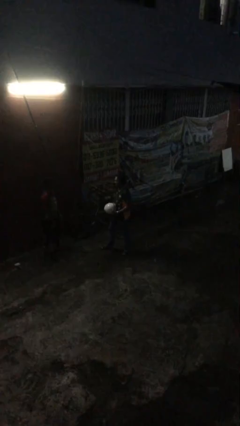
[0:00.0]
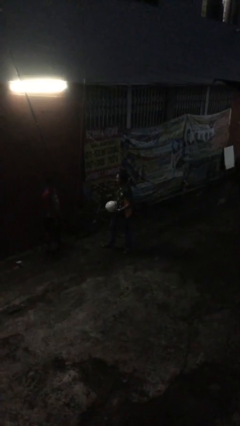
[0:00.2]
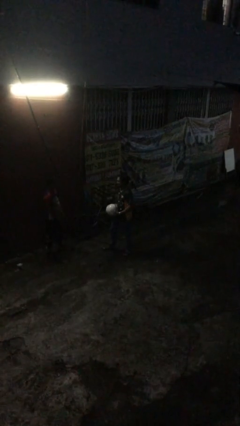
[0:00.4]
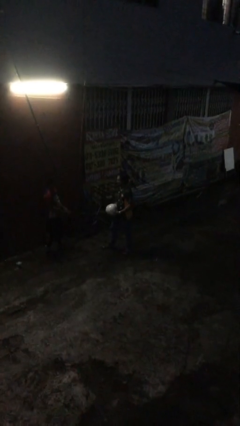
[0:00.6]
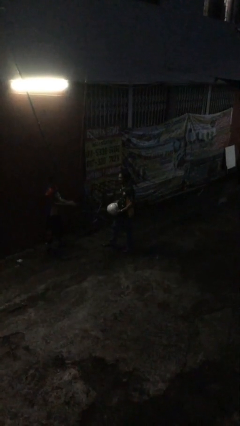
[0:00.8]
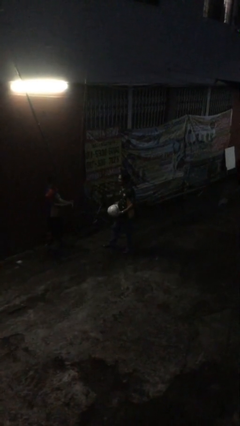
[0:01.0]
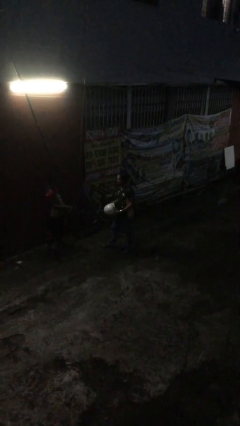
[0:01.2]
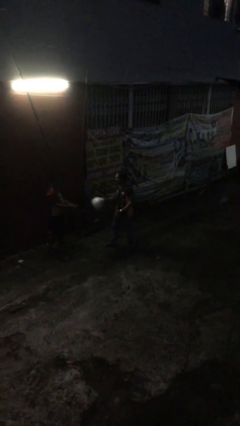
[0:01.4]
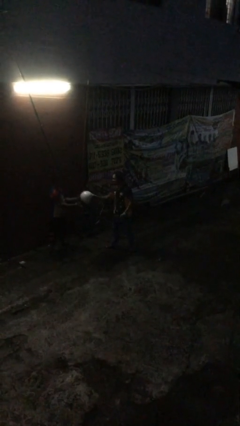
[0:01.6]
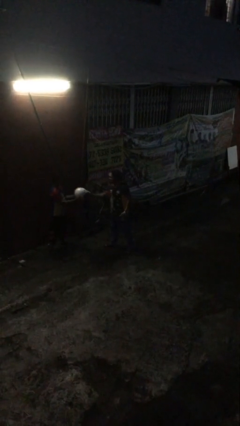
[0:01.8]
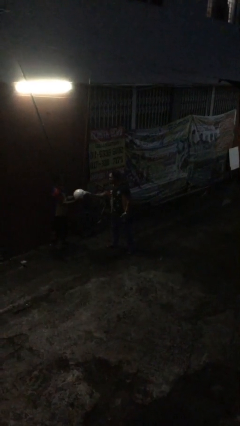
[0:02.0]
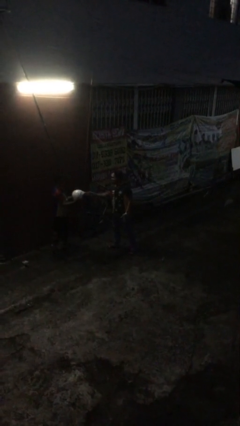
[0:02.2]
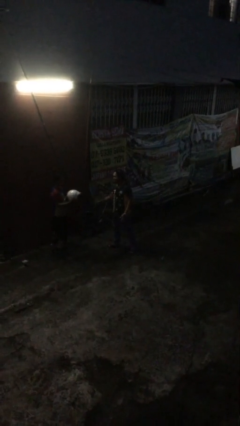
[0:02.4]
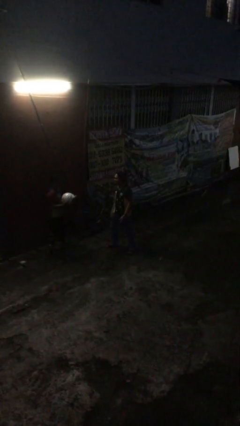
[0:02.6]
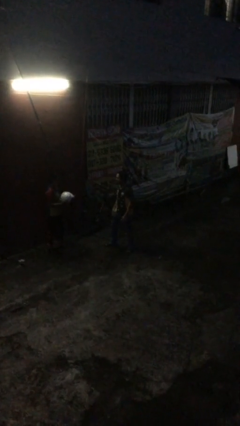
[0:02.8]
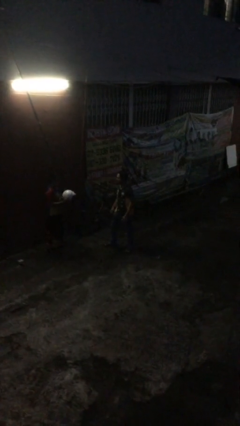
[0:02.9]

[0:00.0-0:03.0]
person transfers object to person

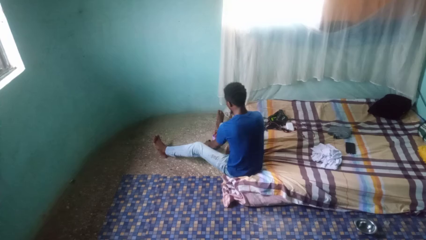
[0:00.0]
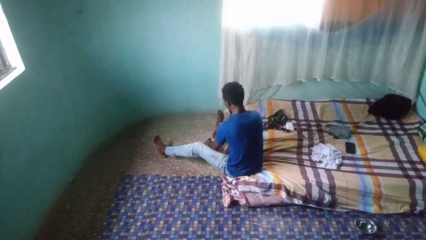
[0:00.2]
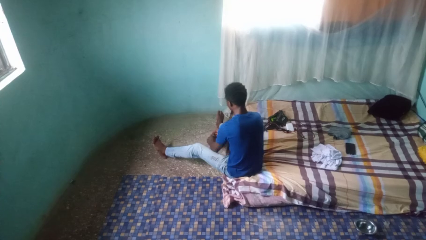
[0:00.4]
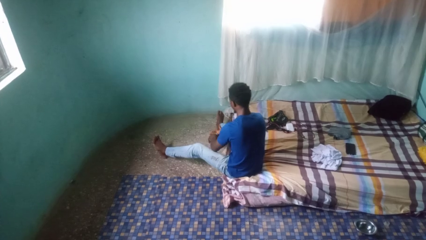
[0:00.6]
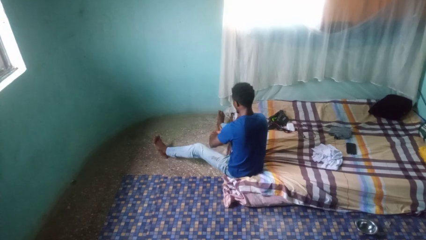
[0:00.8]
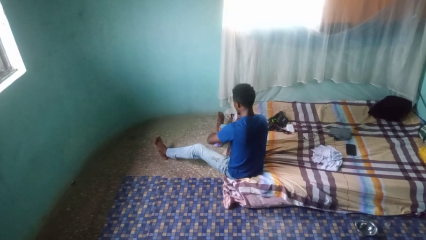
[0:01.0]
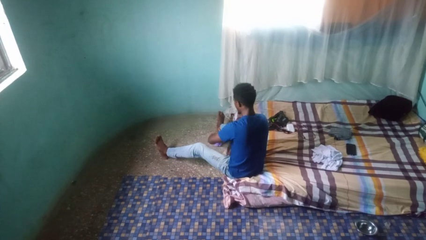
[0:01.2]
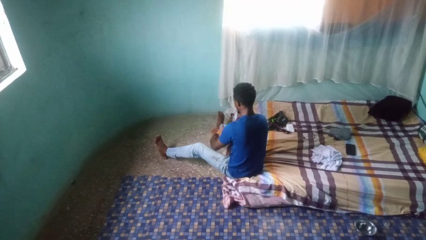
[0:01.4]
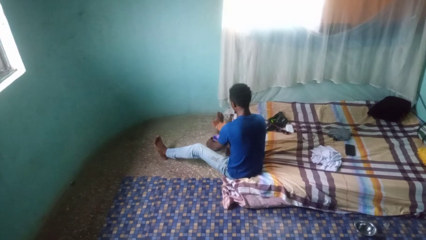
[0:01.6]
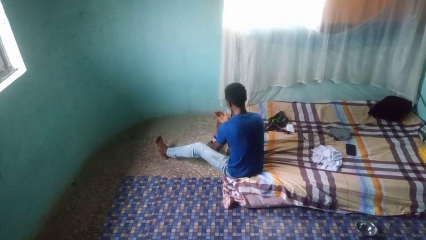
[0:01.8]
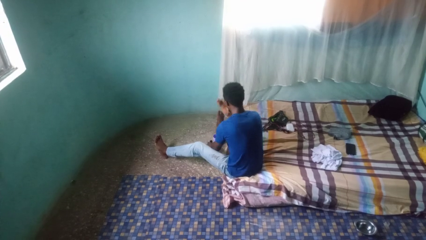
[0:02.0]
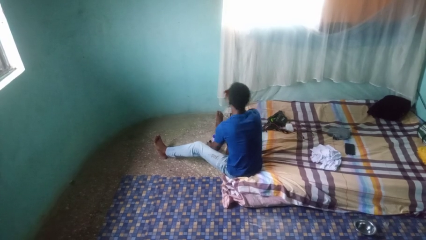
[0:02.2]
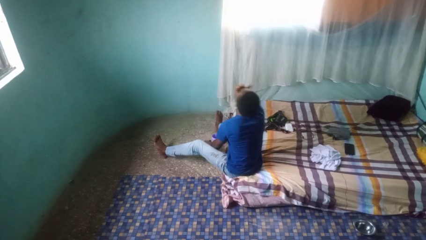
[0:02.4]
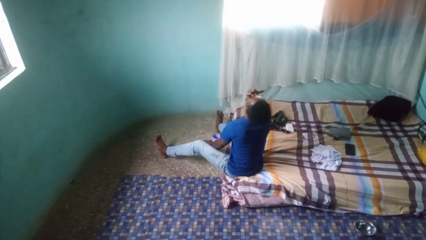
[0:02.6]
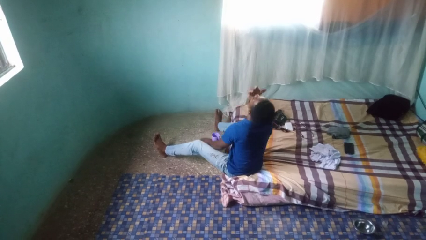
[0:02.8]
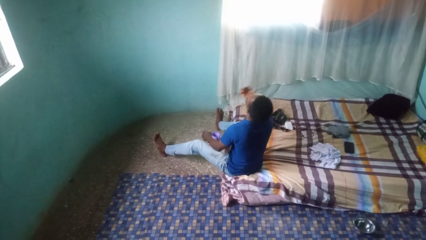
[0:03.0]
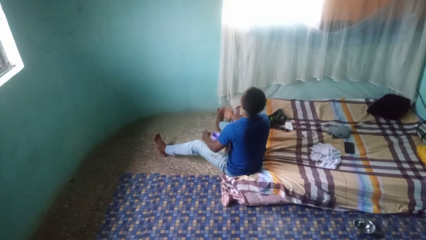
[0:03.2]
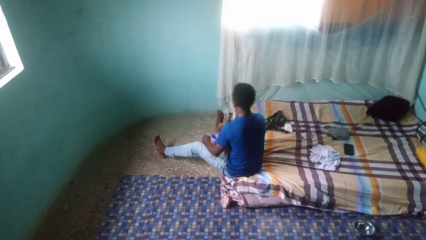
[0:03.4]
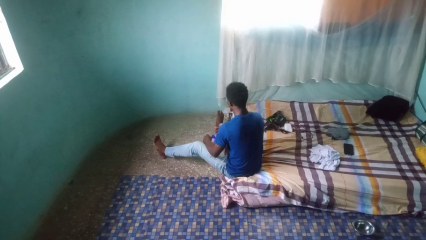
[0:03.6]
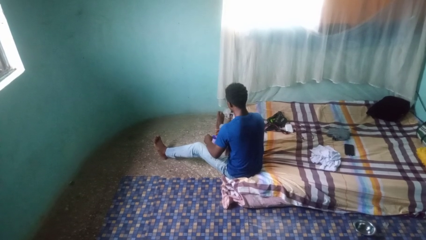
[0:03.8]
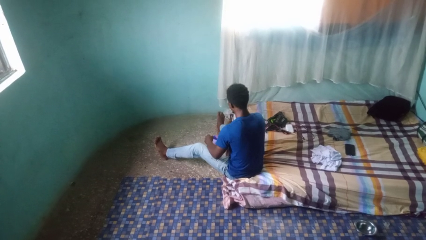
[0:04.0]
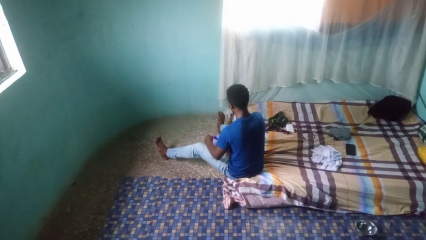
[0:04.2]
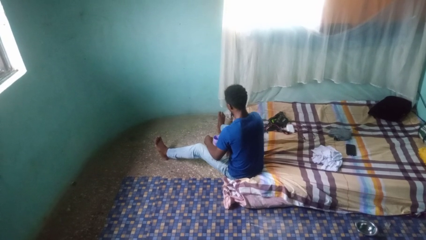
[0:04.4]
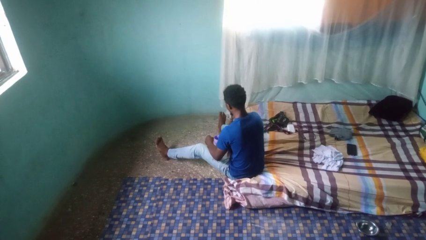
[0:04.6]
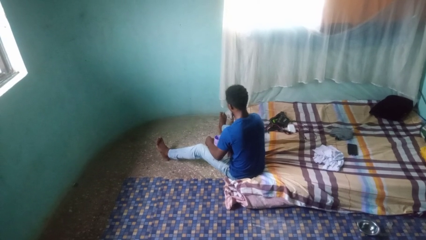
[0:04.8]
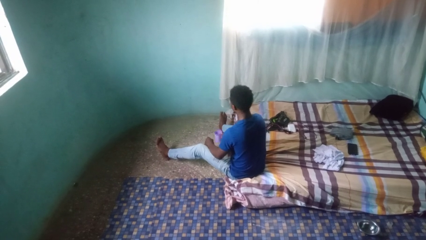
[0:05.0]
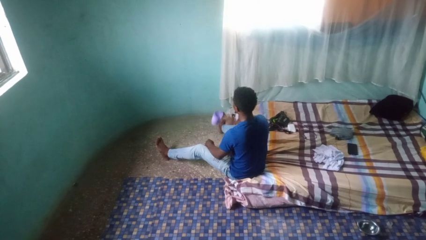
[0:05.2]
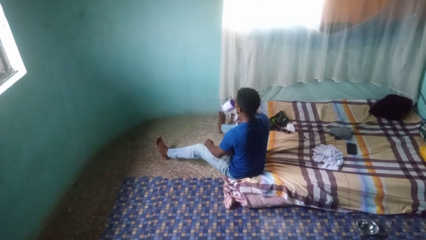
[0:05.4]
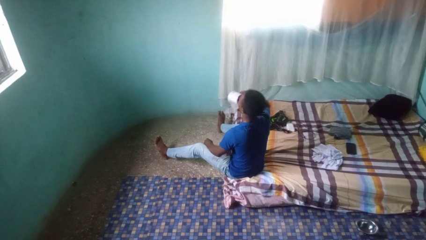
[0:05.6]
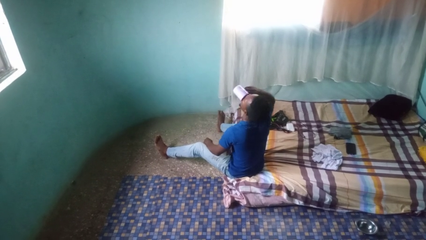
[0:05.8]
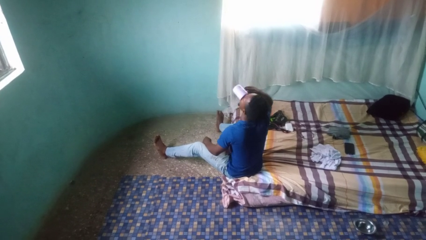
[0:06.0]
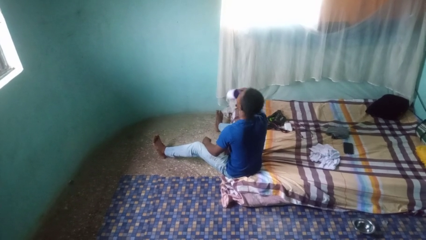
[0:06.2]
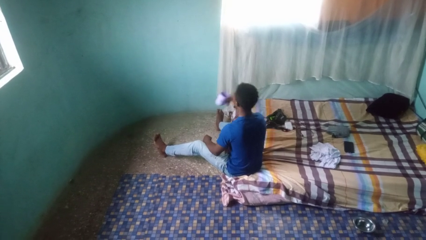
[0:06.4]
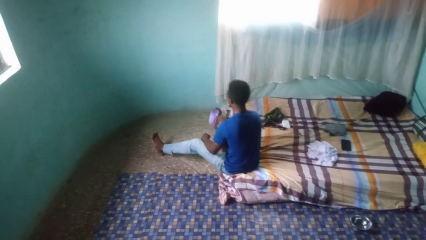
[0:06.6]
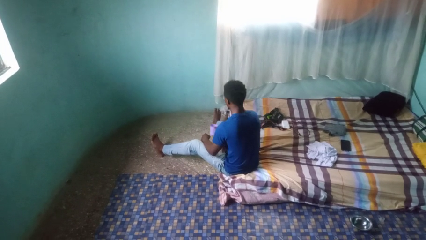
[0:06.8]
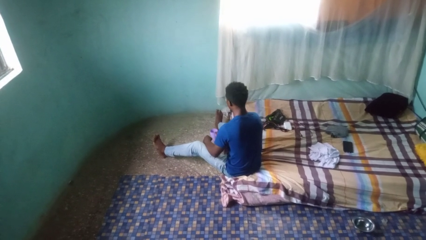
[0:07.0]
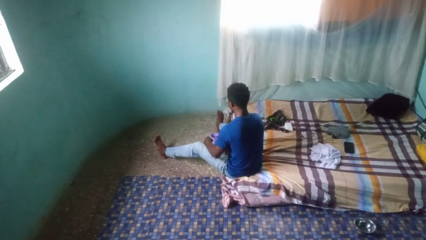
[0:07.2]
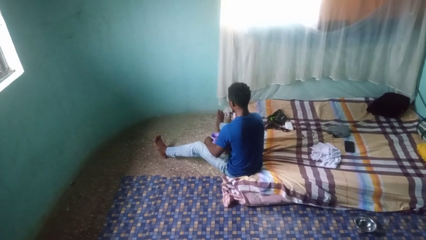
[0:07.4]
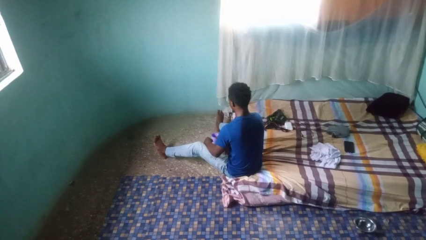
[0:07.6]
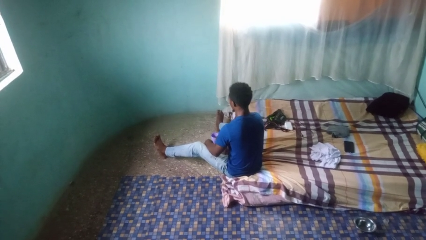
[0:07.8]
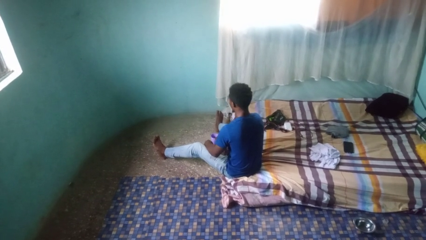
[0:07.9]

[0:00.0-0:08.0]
person takes medicine pills

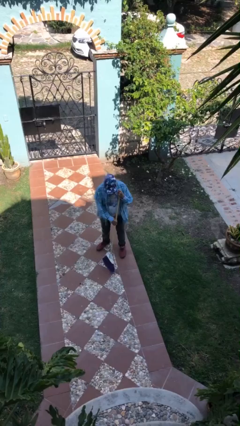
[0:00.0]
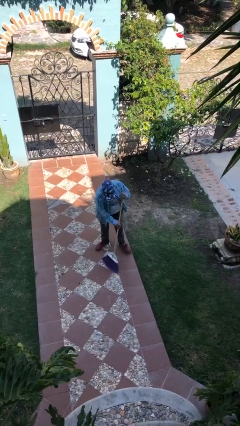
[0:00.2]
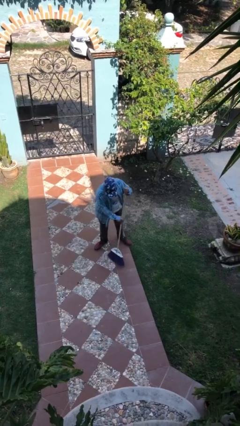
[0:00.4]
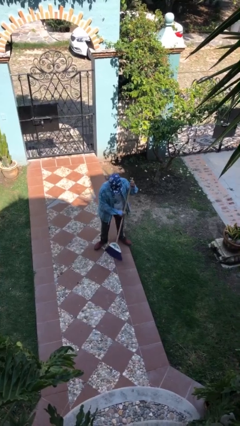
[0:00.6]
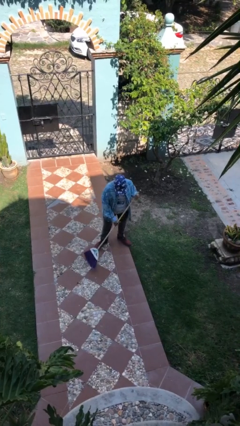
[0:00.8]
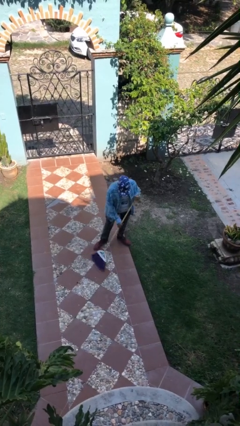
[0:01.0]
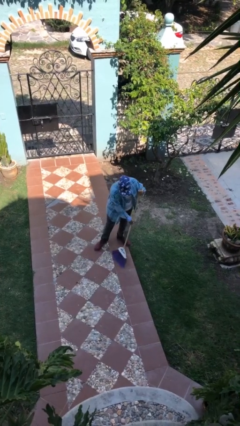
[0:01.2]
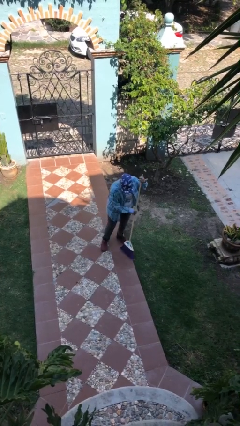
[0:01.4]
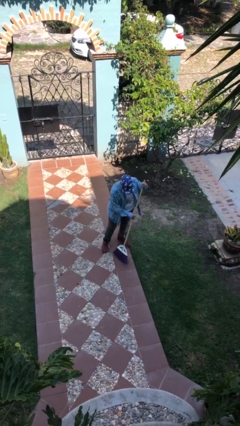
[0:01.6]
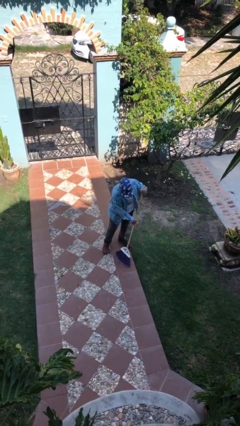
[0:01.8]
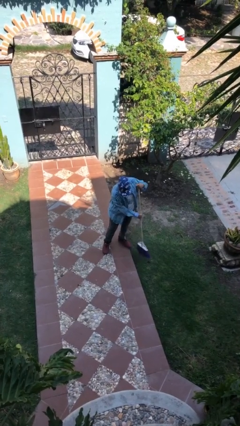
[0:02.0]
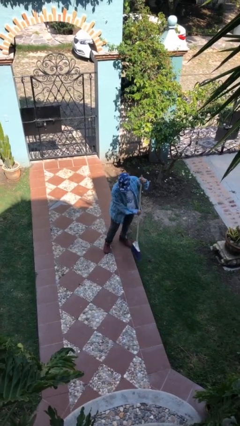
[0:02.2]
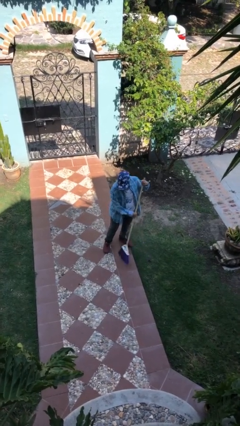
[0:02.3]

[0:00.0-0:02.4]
person sweeps floor

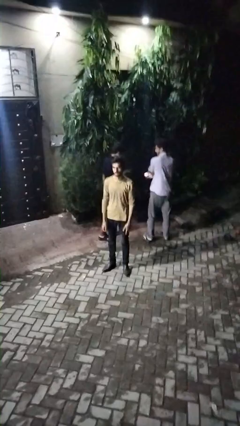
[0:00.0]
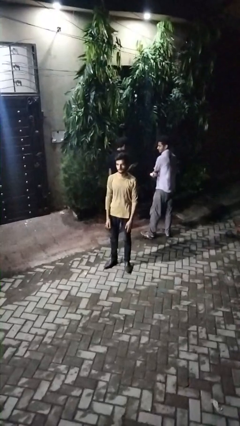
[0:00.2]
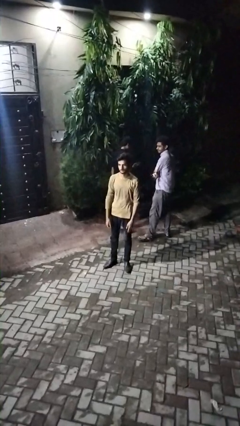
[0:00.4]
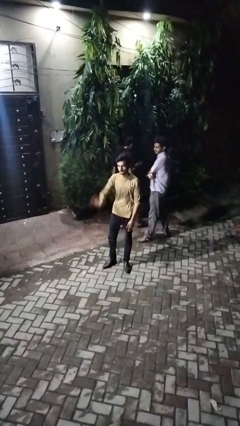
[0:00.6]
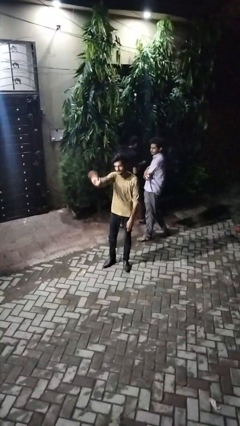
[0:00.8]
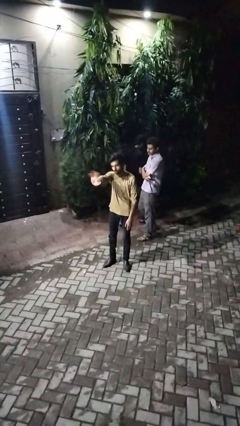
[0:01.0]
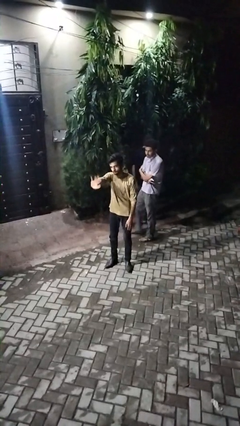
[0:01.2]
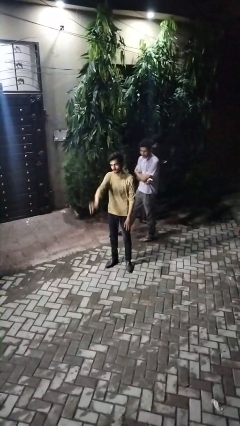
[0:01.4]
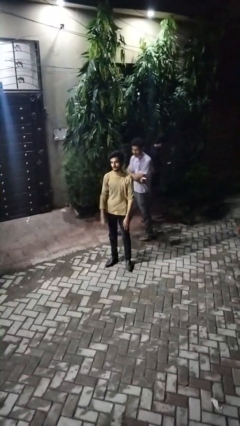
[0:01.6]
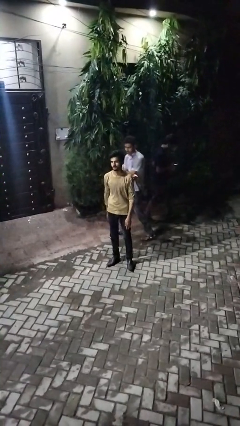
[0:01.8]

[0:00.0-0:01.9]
person waves at person

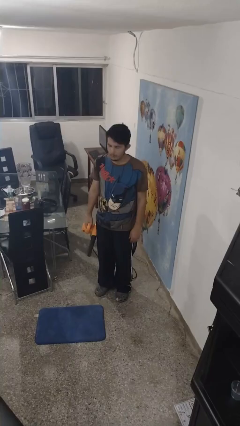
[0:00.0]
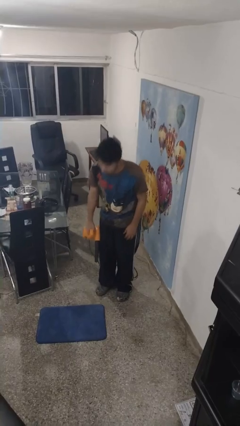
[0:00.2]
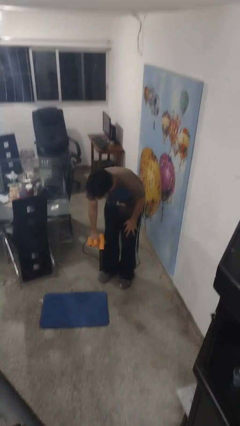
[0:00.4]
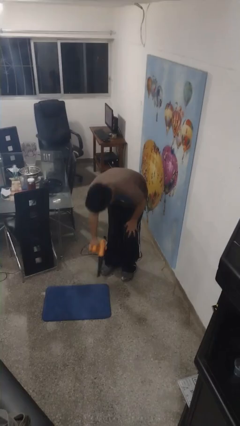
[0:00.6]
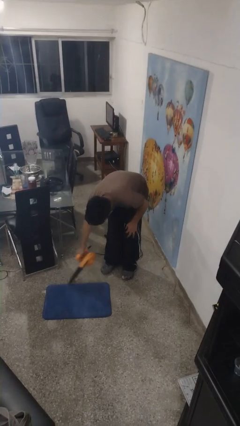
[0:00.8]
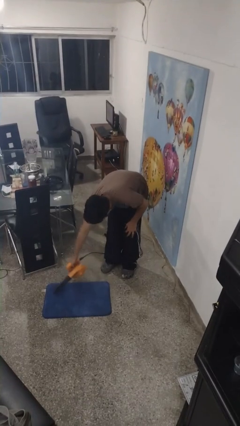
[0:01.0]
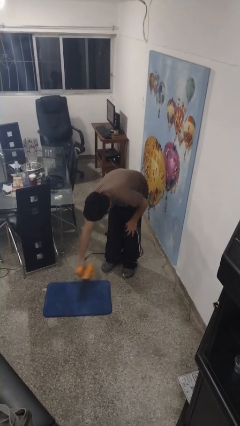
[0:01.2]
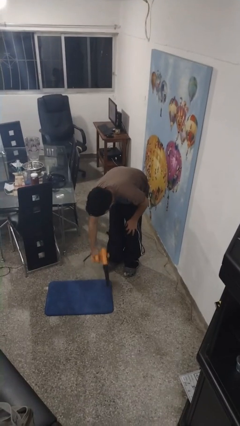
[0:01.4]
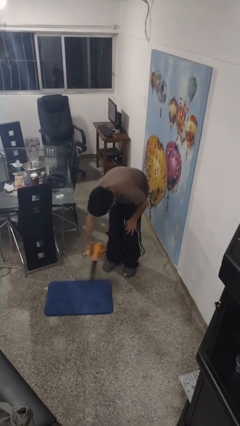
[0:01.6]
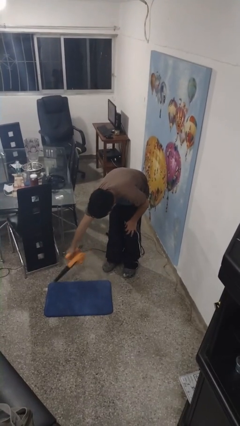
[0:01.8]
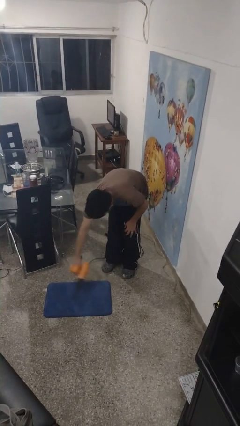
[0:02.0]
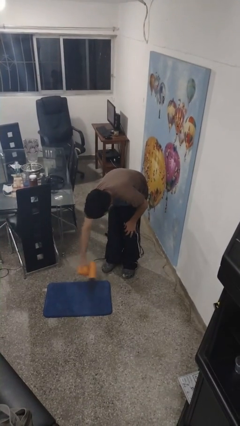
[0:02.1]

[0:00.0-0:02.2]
person vacuums carpet

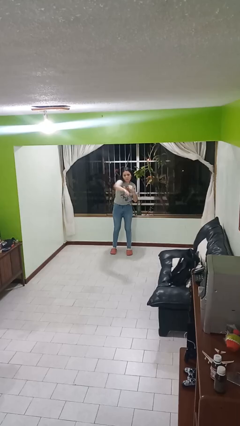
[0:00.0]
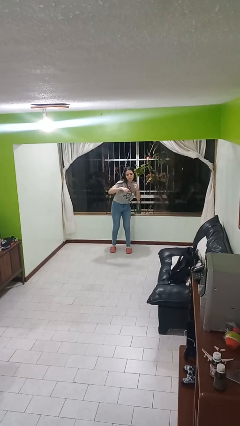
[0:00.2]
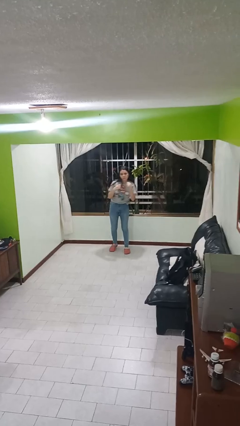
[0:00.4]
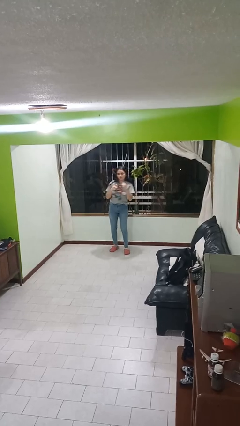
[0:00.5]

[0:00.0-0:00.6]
person punches
